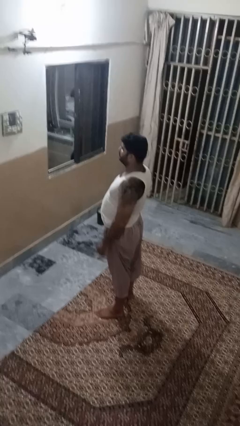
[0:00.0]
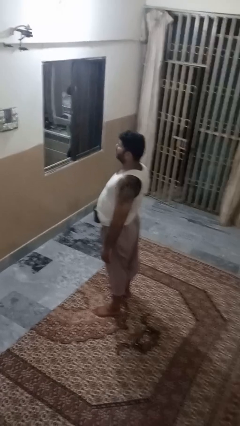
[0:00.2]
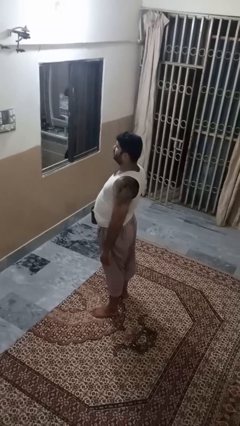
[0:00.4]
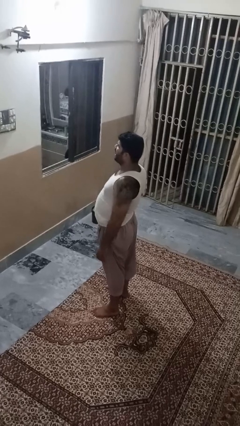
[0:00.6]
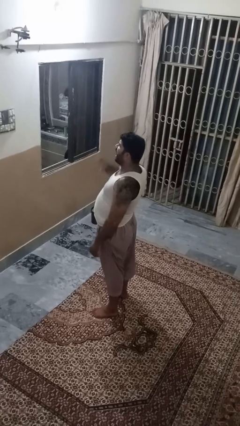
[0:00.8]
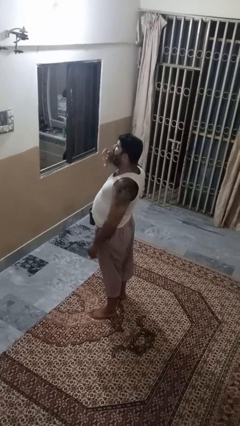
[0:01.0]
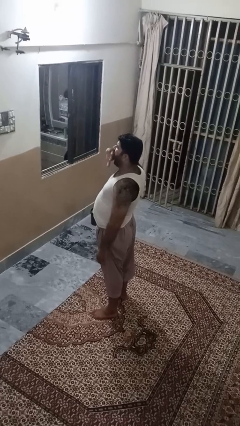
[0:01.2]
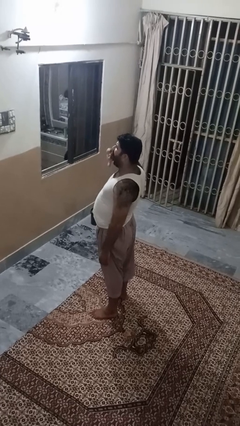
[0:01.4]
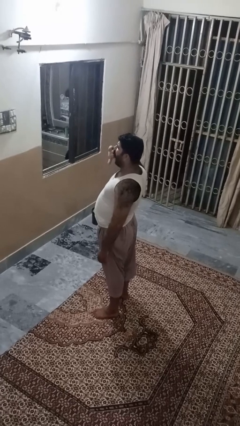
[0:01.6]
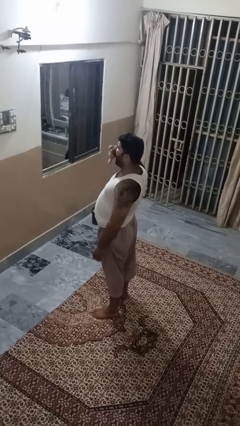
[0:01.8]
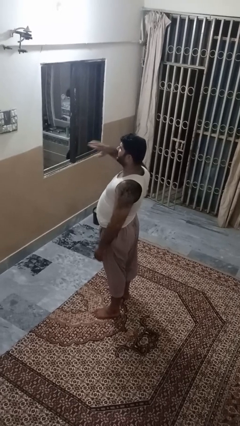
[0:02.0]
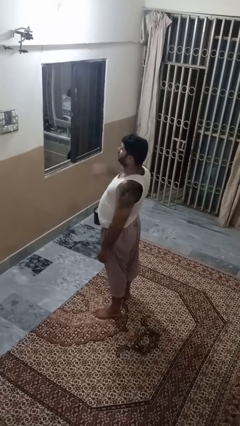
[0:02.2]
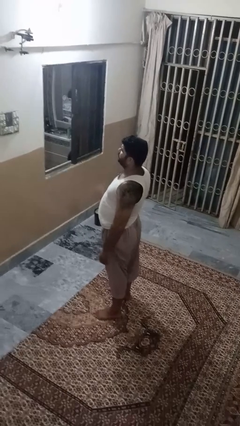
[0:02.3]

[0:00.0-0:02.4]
person yawns

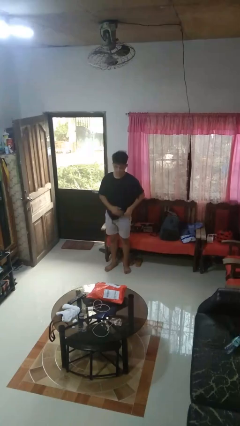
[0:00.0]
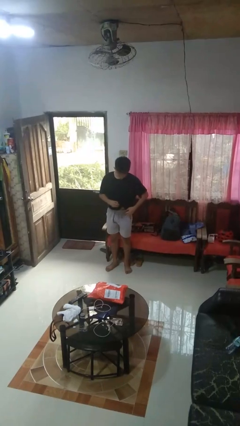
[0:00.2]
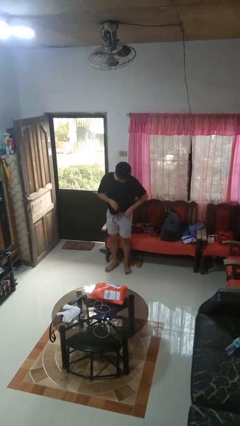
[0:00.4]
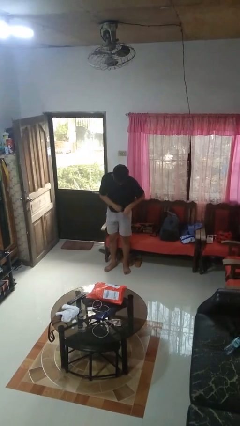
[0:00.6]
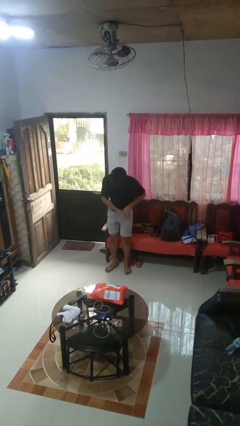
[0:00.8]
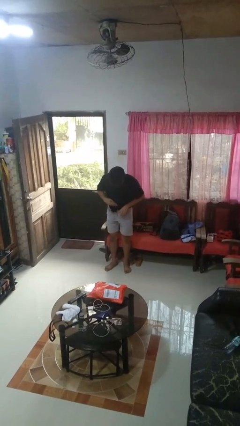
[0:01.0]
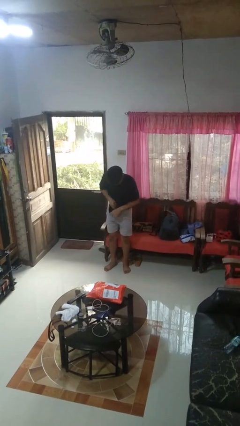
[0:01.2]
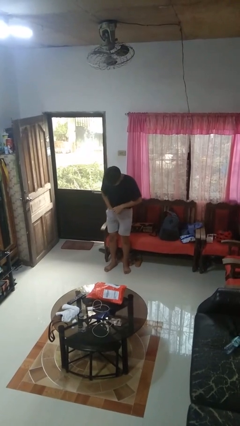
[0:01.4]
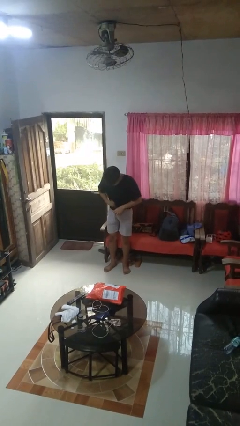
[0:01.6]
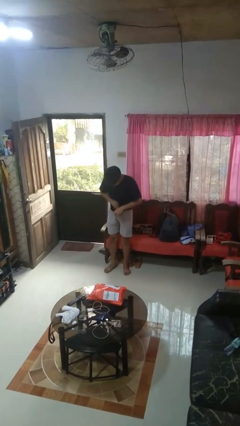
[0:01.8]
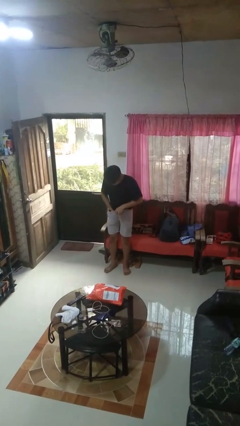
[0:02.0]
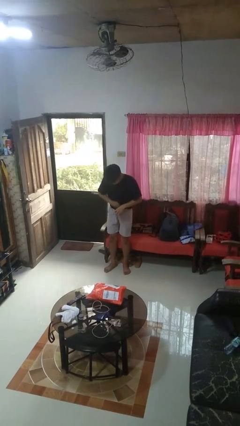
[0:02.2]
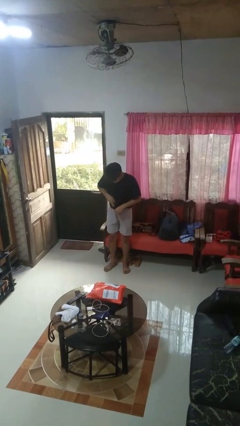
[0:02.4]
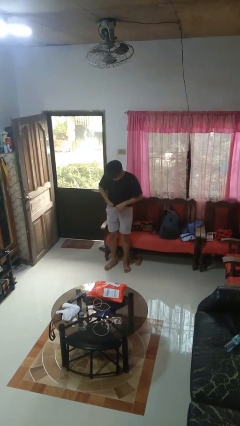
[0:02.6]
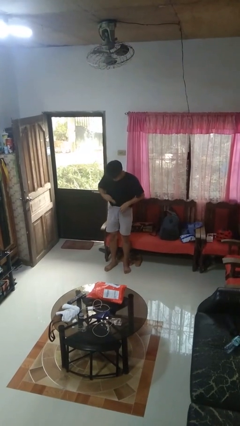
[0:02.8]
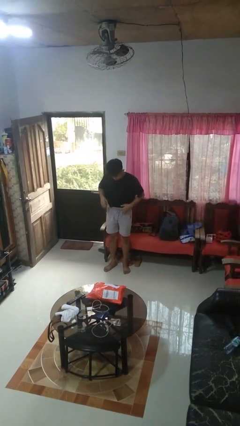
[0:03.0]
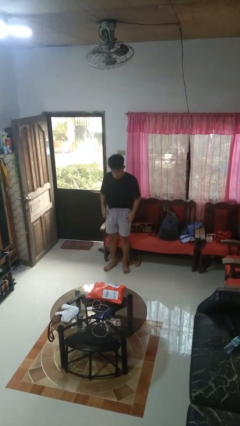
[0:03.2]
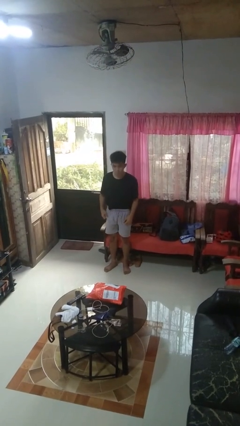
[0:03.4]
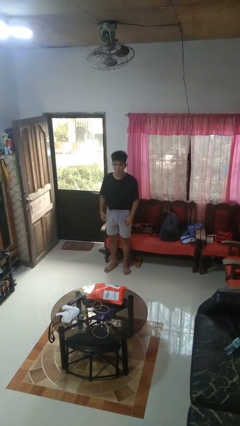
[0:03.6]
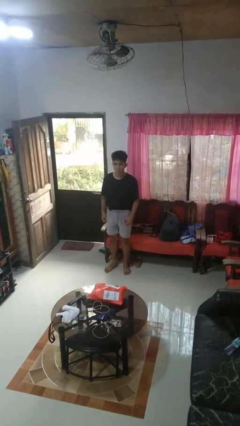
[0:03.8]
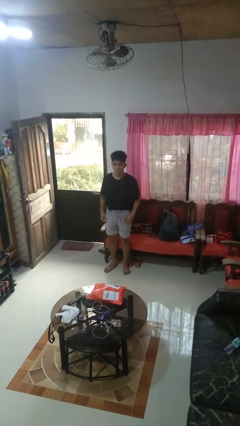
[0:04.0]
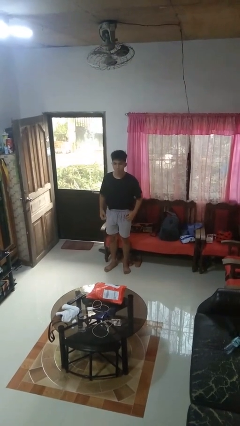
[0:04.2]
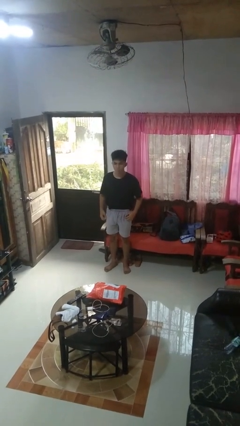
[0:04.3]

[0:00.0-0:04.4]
person tucks in shirt

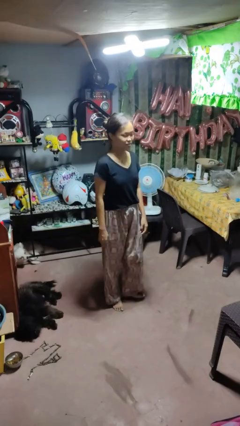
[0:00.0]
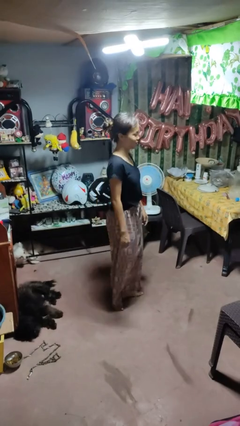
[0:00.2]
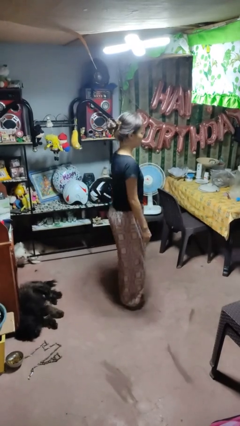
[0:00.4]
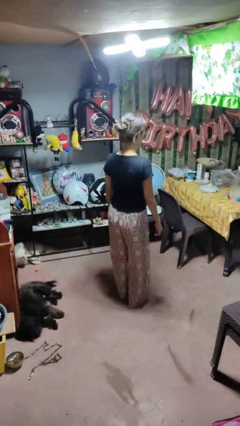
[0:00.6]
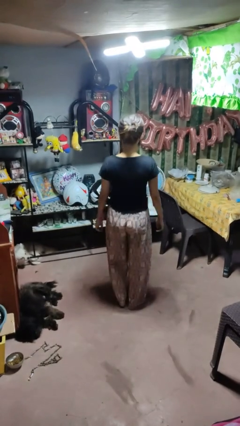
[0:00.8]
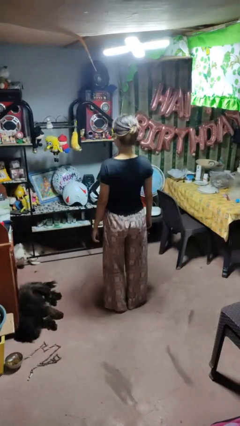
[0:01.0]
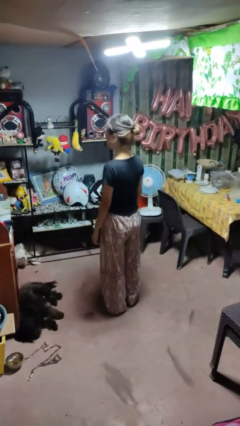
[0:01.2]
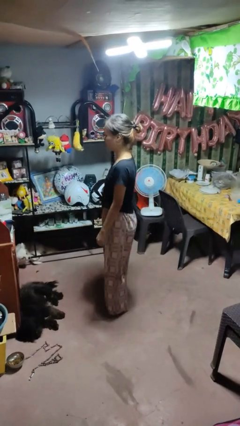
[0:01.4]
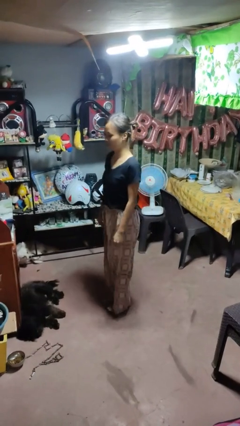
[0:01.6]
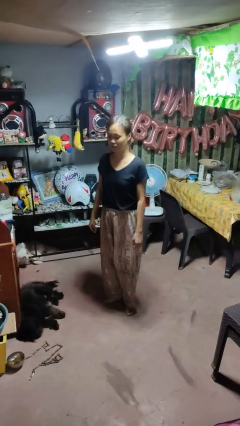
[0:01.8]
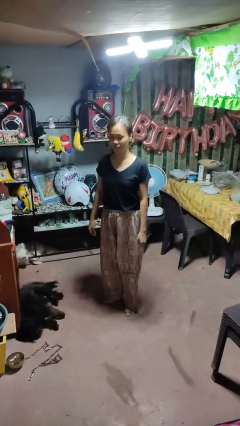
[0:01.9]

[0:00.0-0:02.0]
person twirls

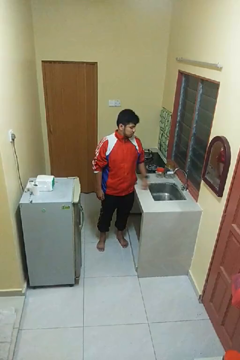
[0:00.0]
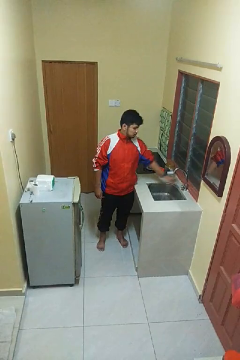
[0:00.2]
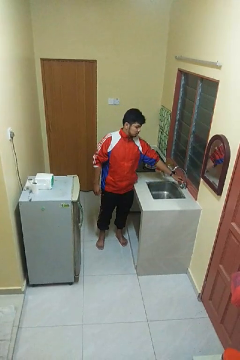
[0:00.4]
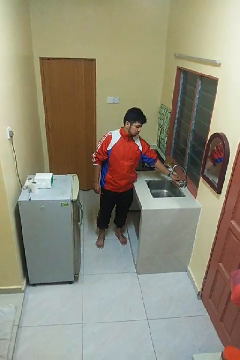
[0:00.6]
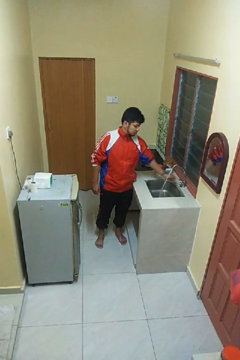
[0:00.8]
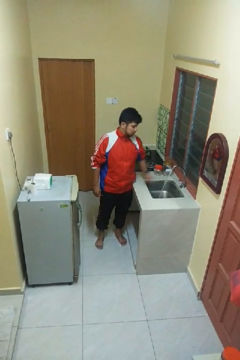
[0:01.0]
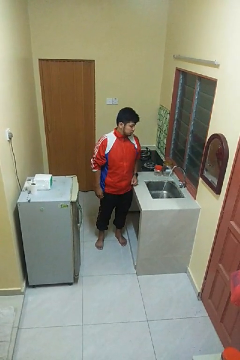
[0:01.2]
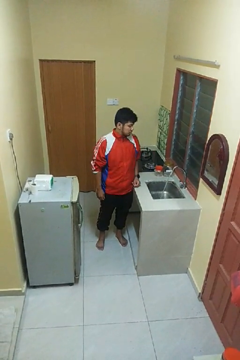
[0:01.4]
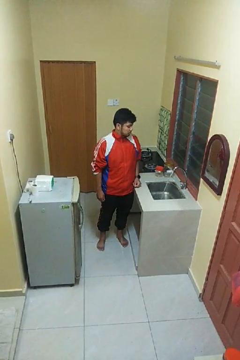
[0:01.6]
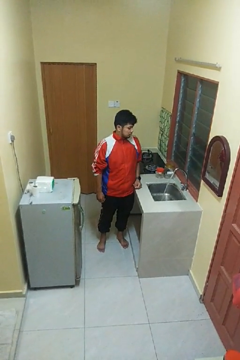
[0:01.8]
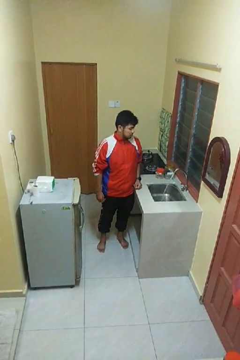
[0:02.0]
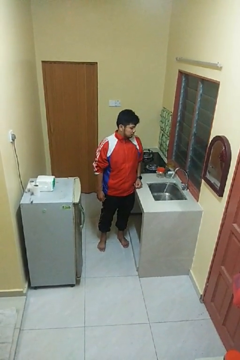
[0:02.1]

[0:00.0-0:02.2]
person turns on faucet

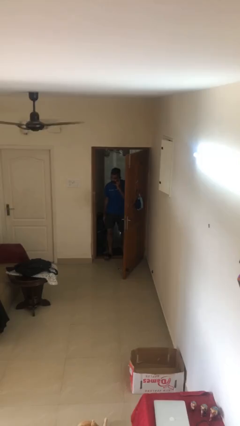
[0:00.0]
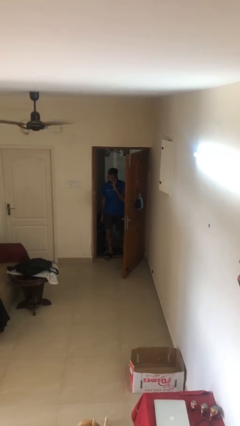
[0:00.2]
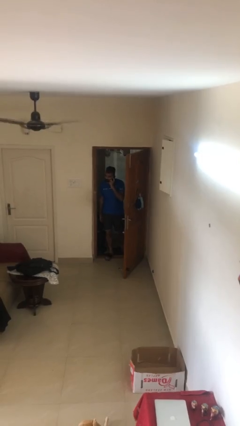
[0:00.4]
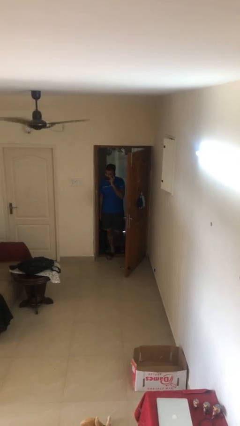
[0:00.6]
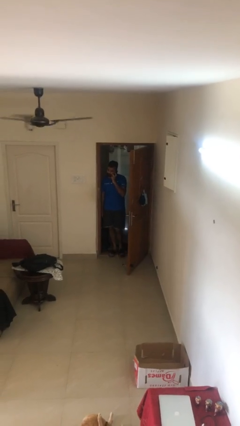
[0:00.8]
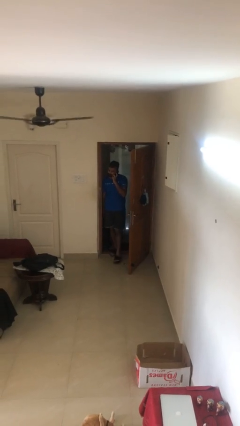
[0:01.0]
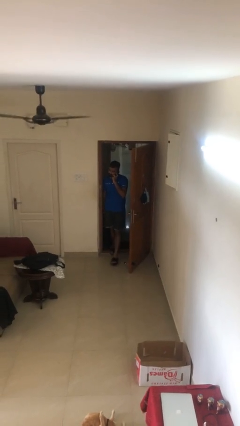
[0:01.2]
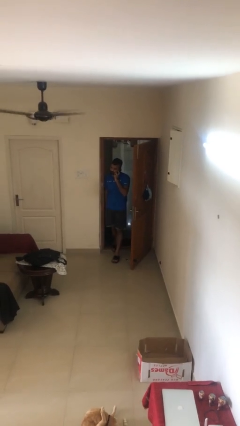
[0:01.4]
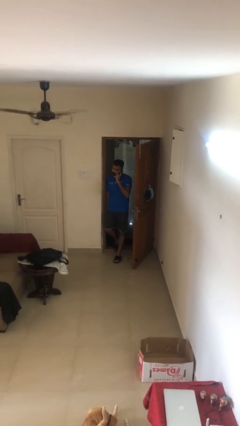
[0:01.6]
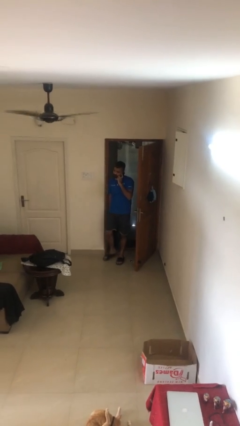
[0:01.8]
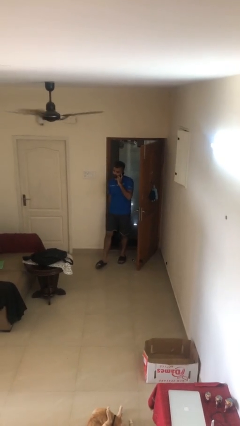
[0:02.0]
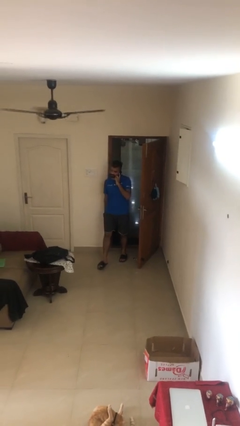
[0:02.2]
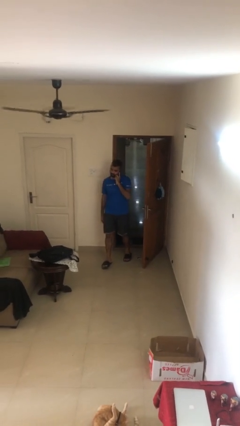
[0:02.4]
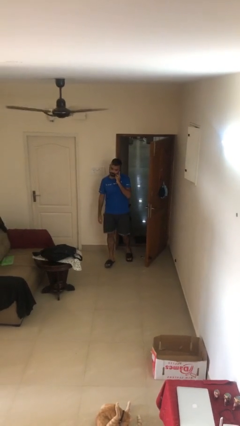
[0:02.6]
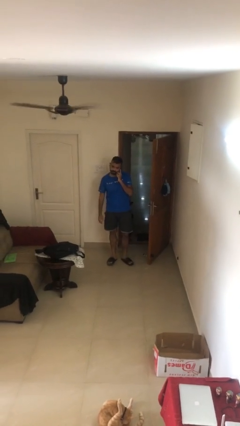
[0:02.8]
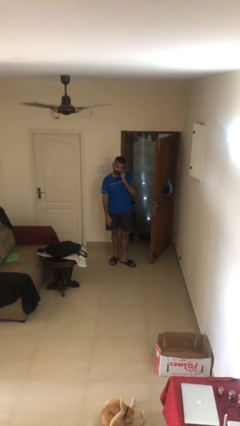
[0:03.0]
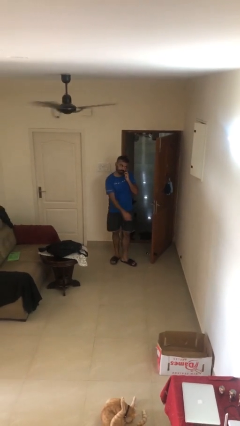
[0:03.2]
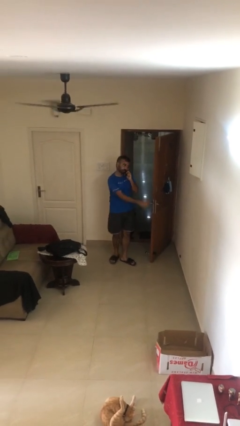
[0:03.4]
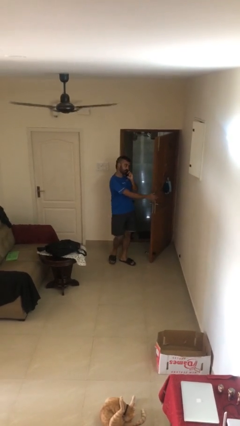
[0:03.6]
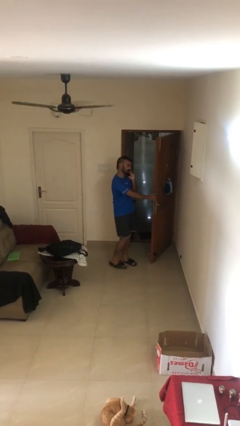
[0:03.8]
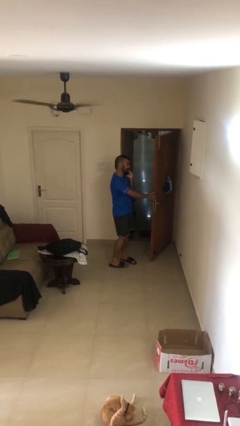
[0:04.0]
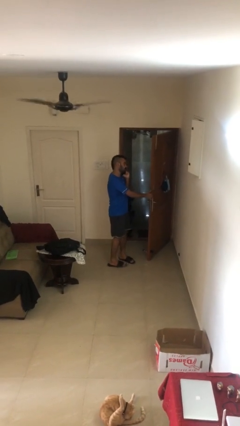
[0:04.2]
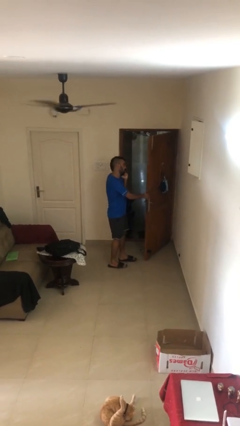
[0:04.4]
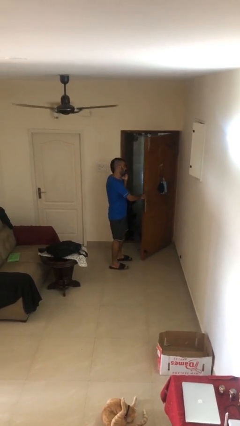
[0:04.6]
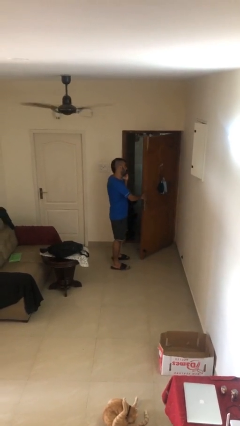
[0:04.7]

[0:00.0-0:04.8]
person enters scene through structure

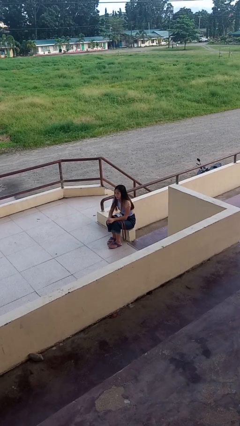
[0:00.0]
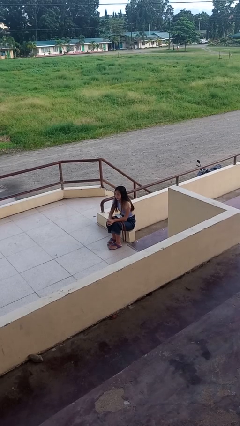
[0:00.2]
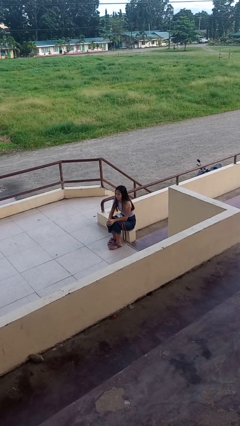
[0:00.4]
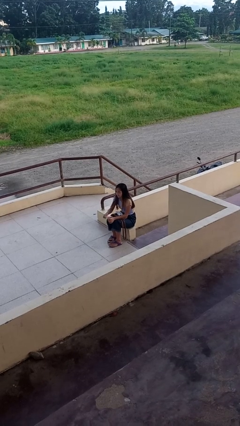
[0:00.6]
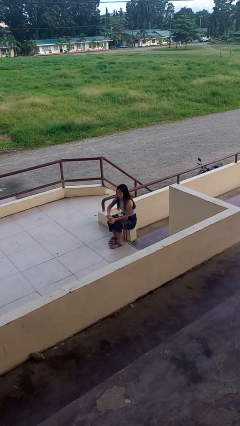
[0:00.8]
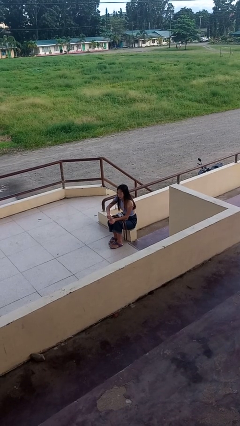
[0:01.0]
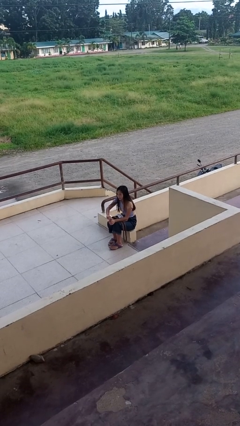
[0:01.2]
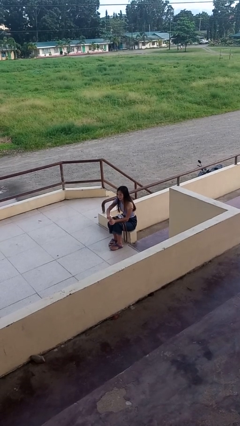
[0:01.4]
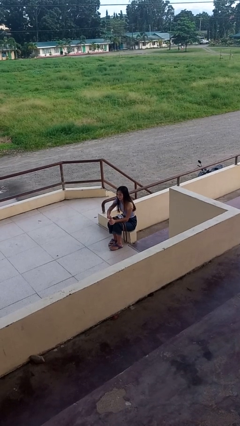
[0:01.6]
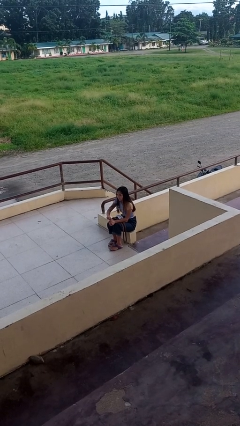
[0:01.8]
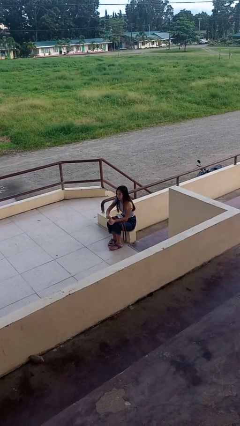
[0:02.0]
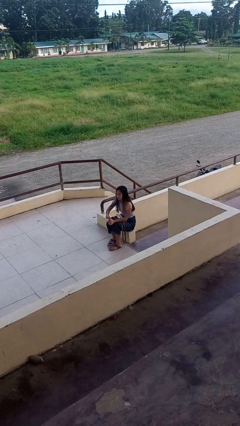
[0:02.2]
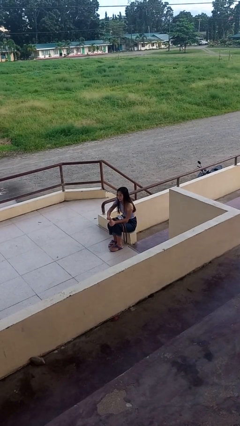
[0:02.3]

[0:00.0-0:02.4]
person opens beverage can
